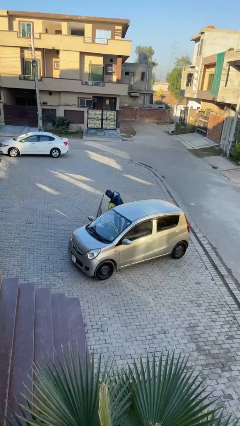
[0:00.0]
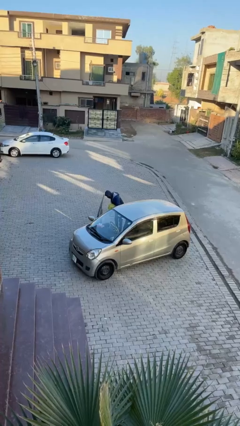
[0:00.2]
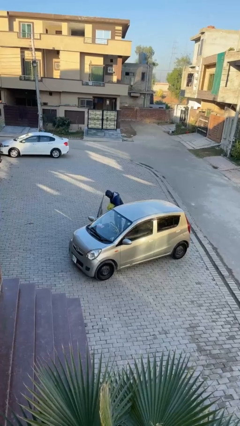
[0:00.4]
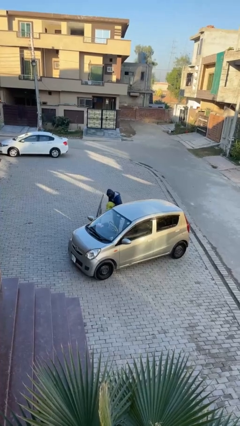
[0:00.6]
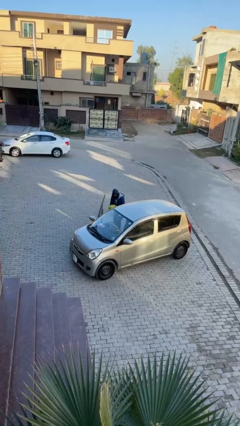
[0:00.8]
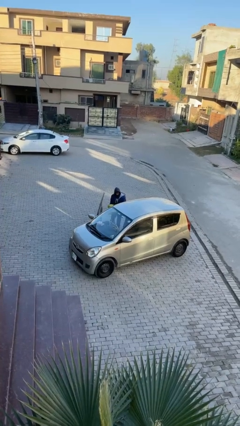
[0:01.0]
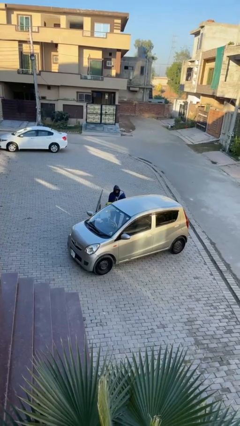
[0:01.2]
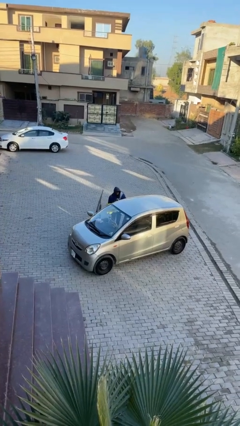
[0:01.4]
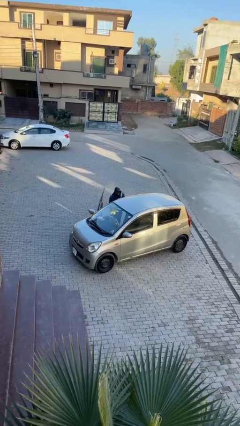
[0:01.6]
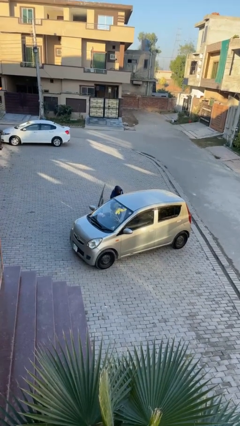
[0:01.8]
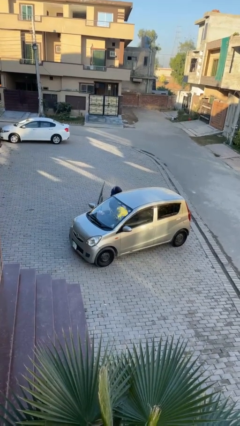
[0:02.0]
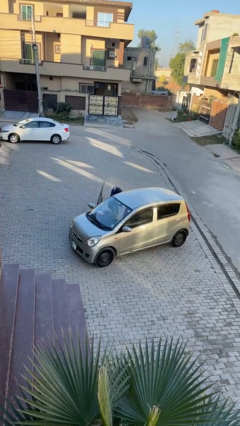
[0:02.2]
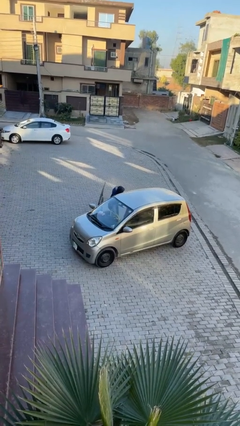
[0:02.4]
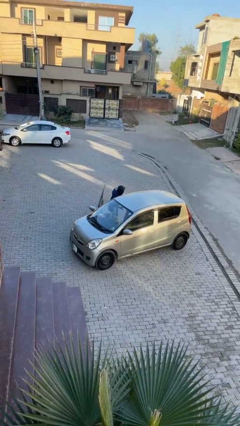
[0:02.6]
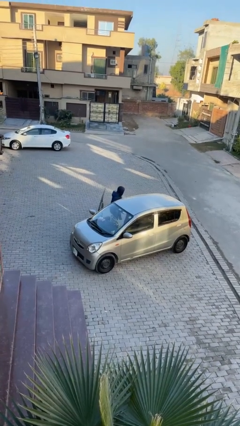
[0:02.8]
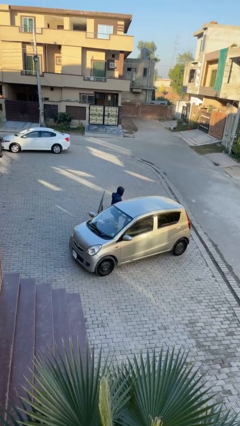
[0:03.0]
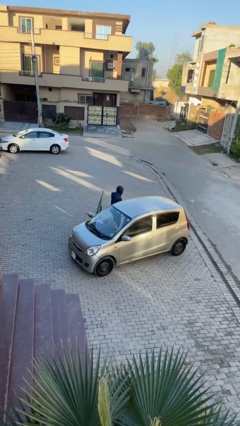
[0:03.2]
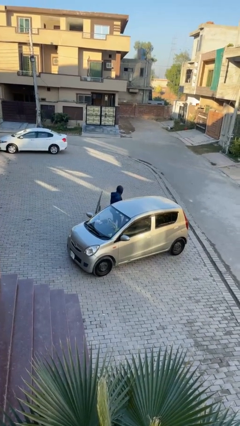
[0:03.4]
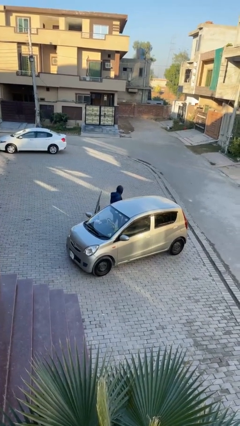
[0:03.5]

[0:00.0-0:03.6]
person loads car

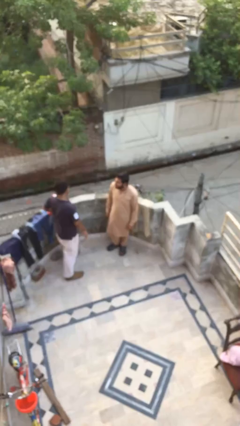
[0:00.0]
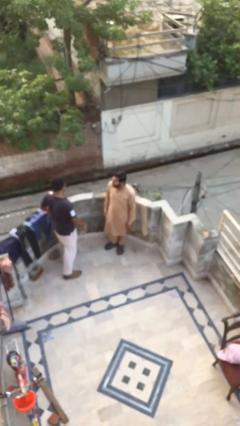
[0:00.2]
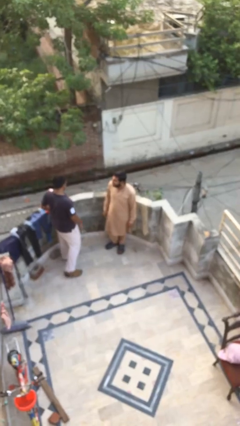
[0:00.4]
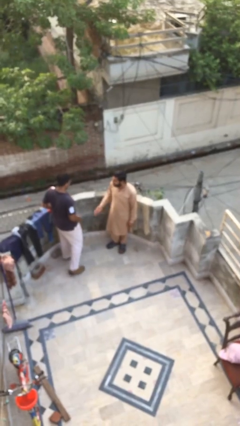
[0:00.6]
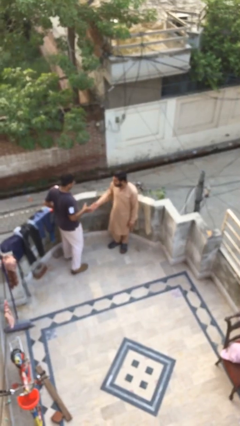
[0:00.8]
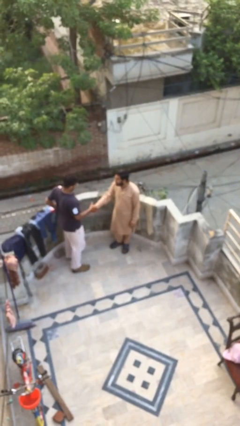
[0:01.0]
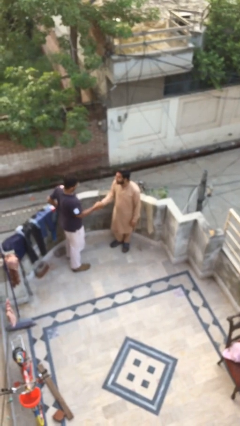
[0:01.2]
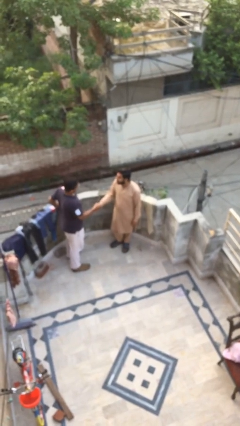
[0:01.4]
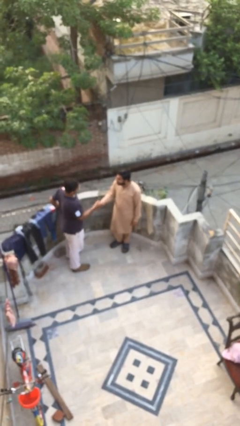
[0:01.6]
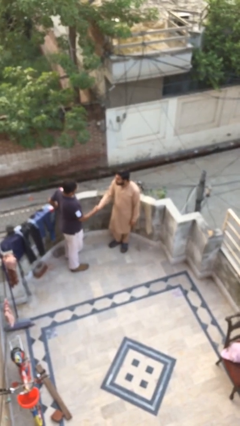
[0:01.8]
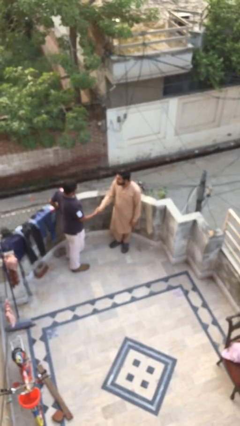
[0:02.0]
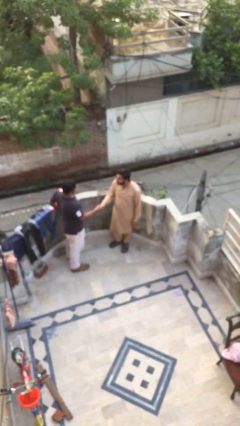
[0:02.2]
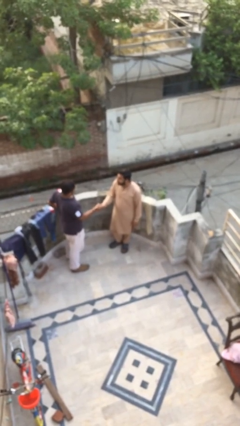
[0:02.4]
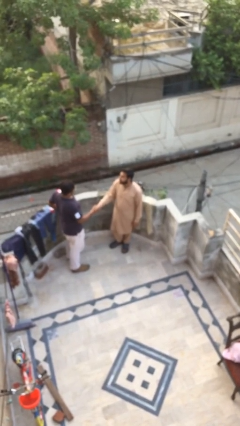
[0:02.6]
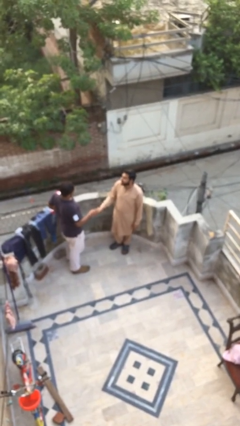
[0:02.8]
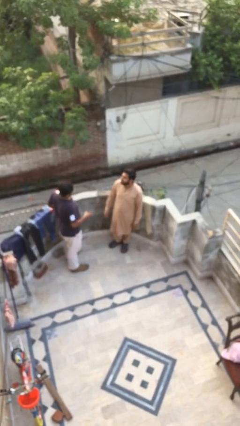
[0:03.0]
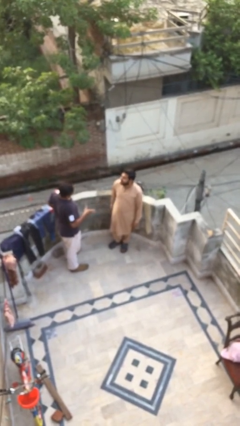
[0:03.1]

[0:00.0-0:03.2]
person shakes hand

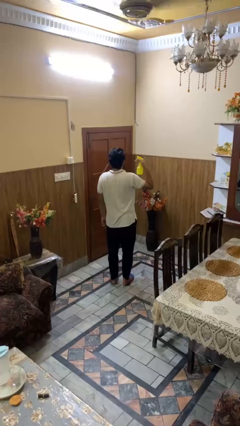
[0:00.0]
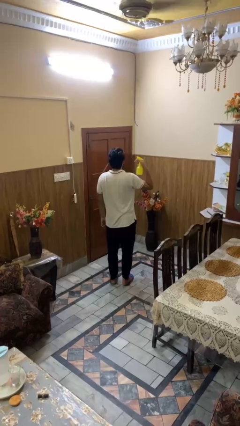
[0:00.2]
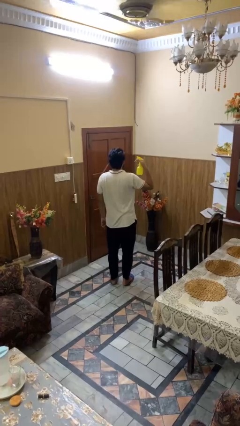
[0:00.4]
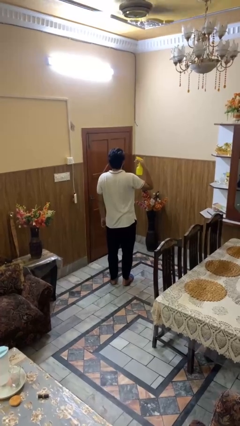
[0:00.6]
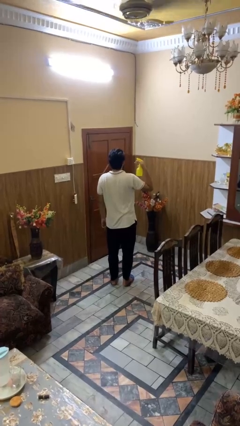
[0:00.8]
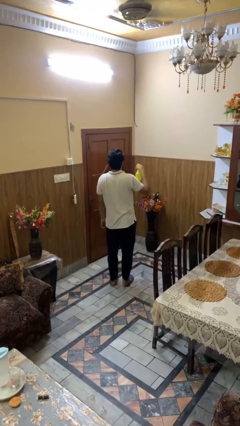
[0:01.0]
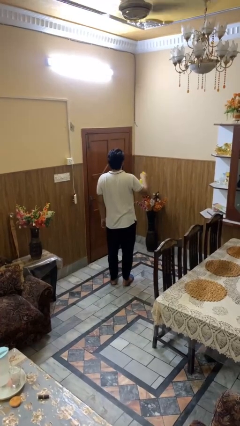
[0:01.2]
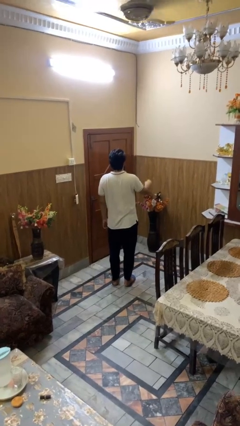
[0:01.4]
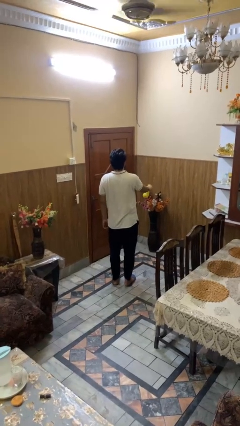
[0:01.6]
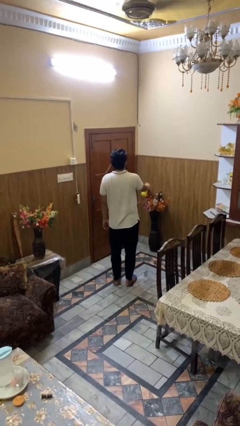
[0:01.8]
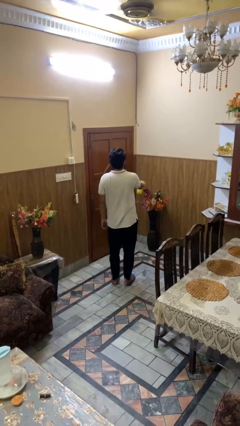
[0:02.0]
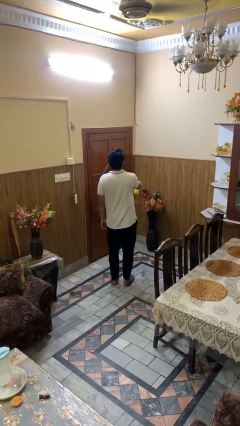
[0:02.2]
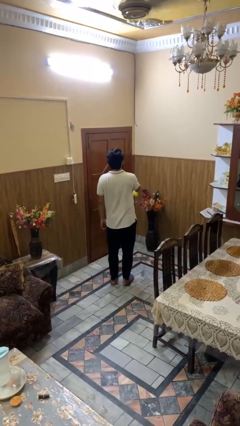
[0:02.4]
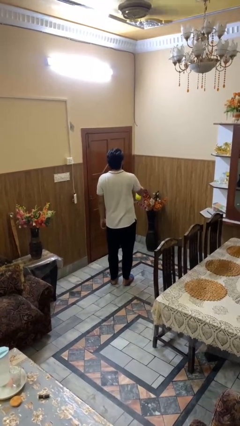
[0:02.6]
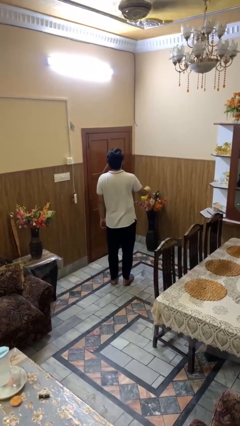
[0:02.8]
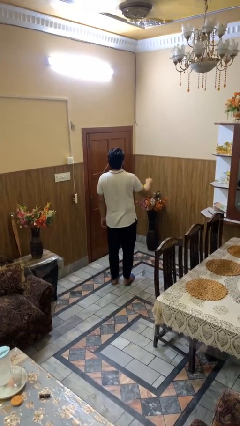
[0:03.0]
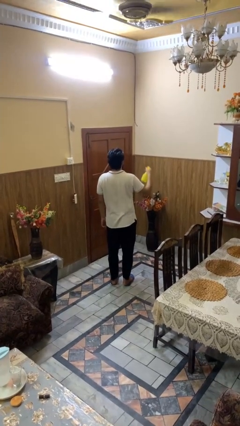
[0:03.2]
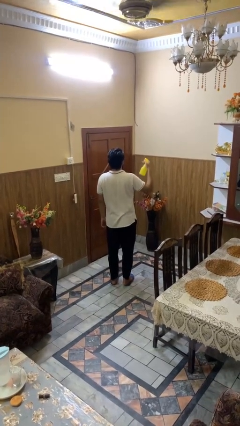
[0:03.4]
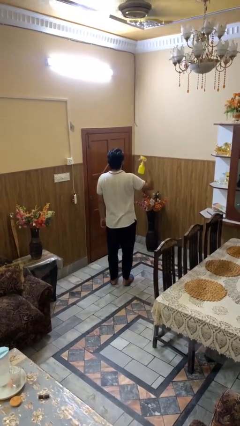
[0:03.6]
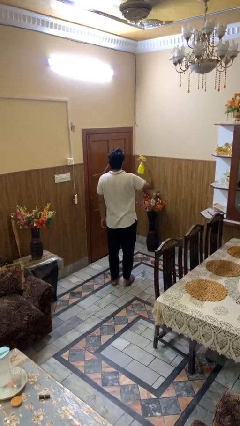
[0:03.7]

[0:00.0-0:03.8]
person sprays from bottle

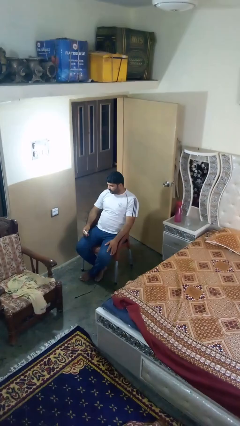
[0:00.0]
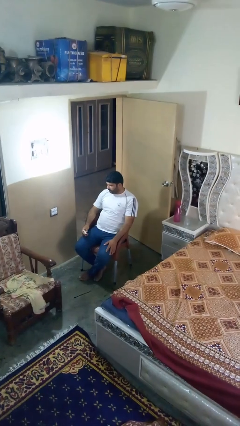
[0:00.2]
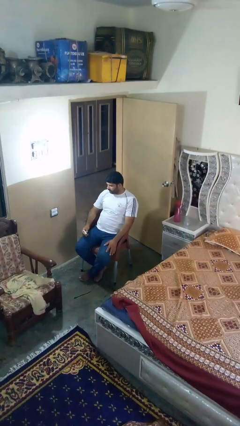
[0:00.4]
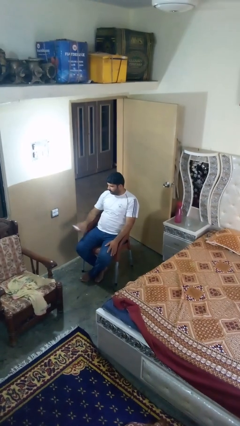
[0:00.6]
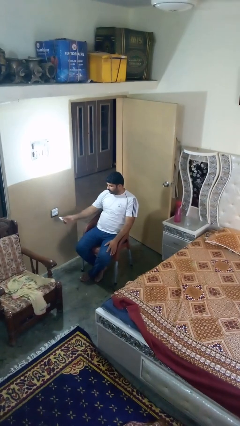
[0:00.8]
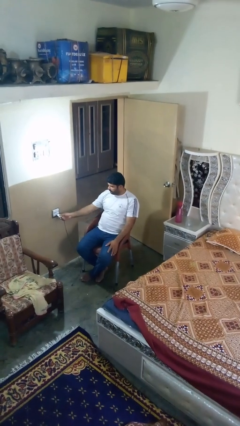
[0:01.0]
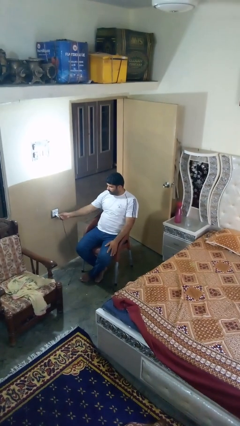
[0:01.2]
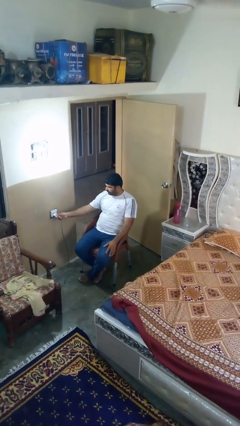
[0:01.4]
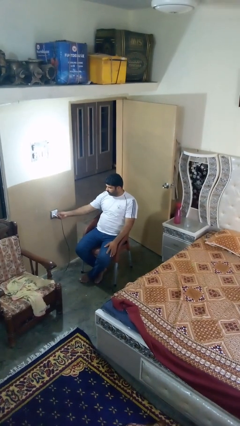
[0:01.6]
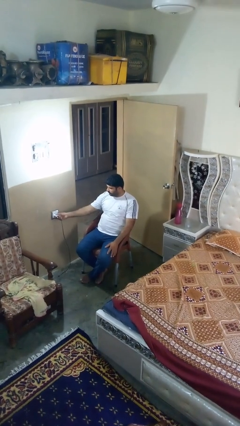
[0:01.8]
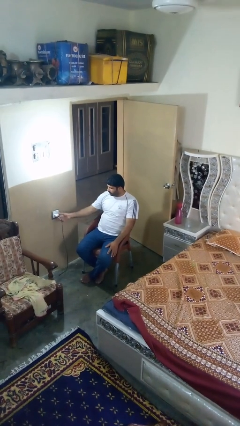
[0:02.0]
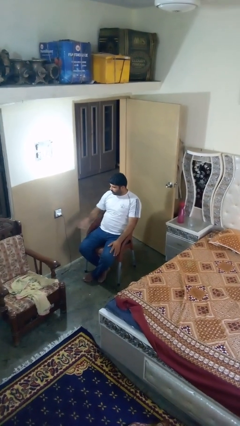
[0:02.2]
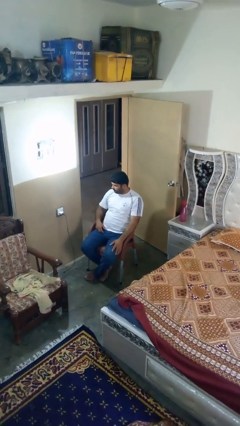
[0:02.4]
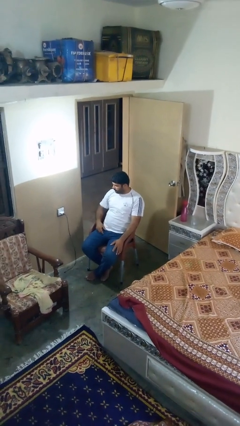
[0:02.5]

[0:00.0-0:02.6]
person plugs into electrical socket

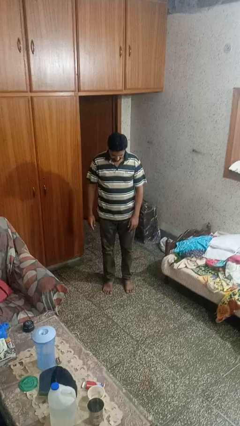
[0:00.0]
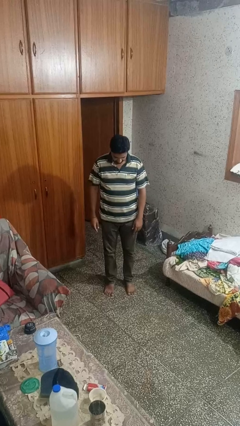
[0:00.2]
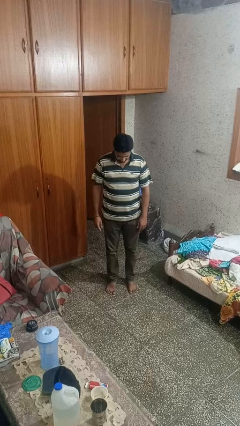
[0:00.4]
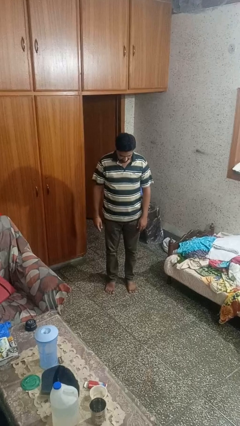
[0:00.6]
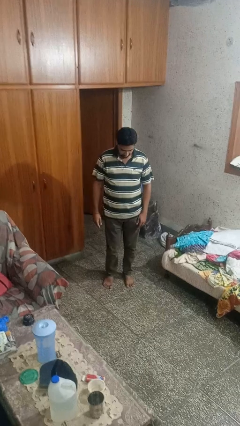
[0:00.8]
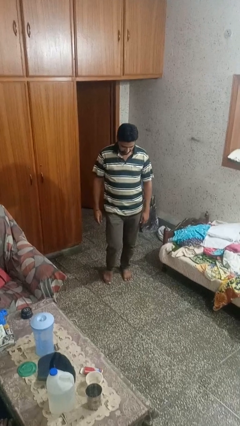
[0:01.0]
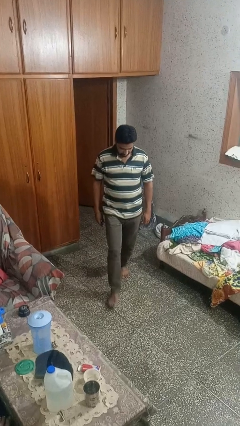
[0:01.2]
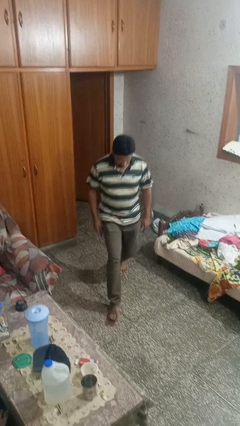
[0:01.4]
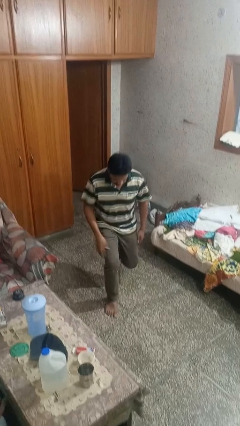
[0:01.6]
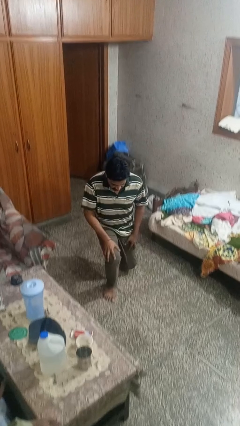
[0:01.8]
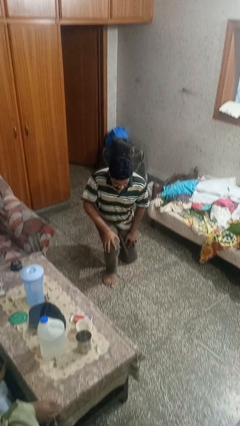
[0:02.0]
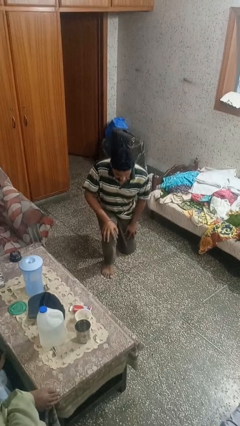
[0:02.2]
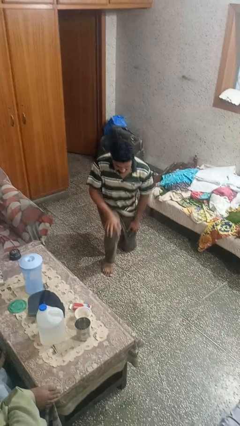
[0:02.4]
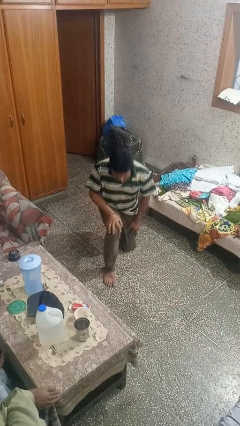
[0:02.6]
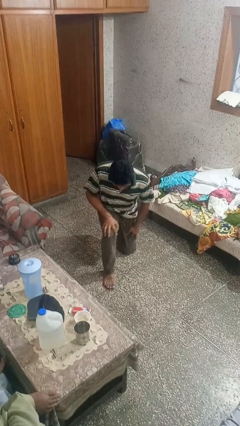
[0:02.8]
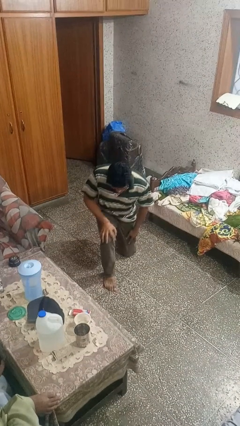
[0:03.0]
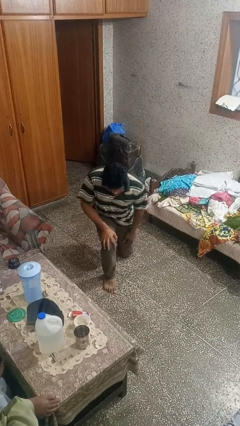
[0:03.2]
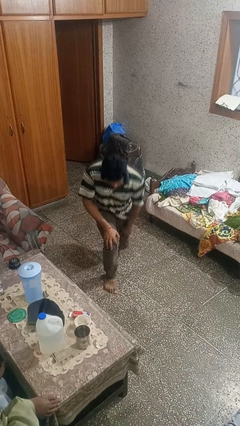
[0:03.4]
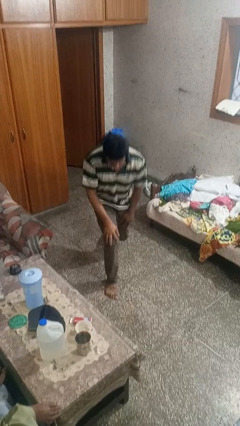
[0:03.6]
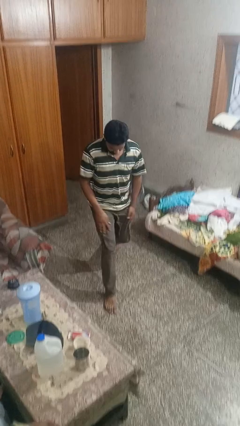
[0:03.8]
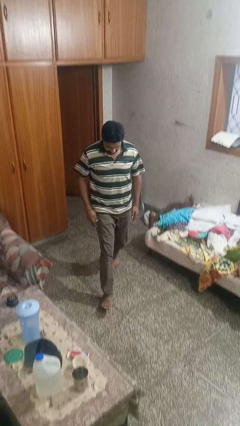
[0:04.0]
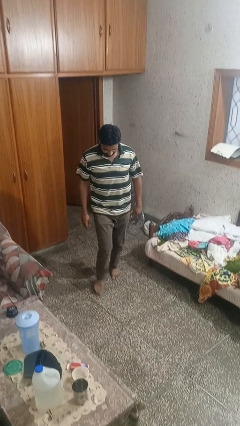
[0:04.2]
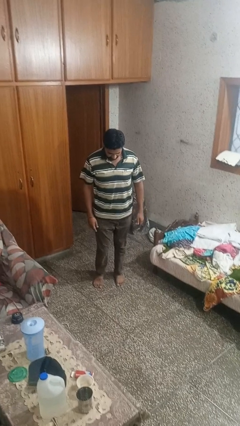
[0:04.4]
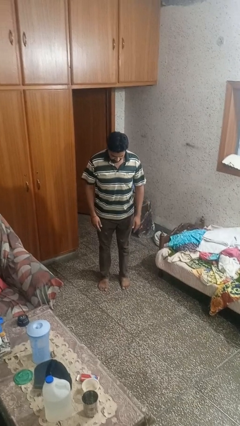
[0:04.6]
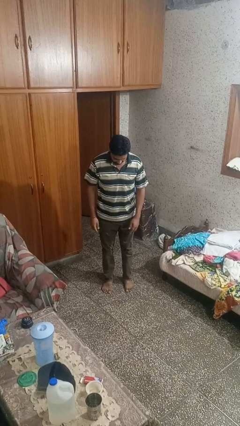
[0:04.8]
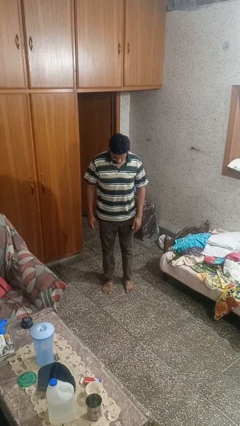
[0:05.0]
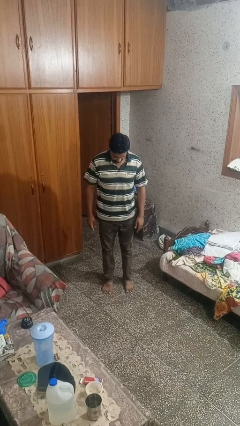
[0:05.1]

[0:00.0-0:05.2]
person exercises with lunges
